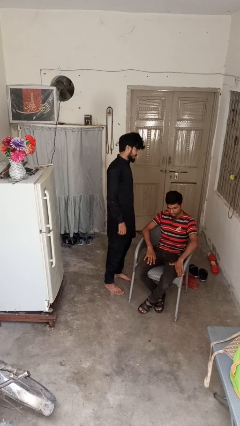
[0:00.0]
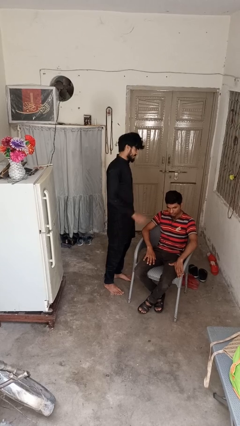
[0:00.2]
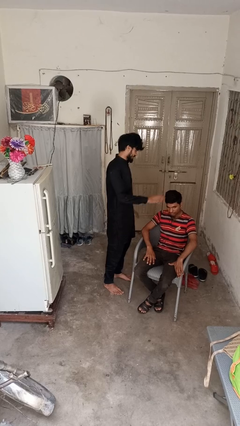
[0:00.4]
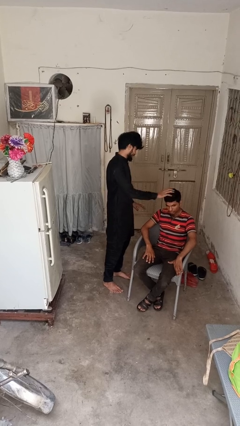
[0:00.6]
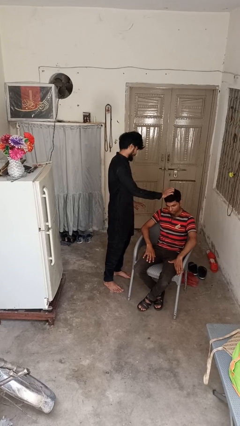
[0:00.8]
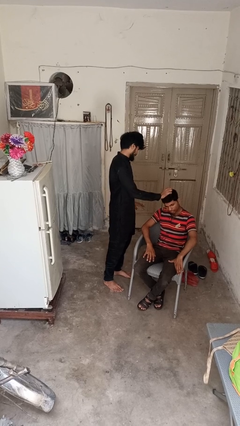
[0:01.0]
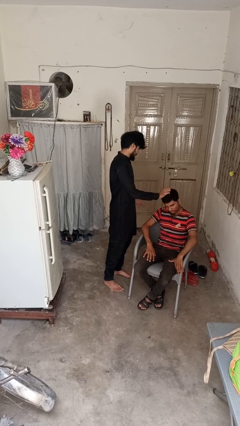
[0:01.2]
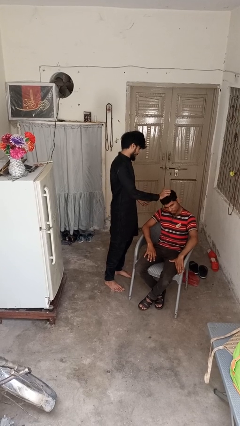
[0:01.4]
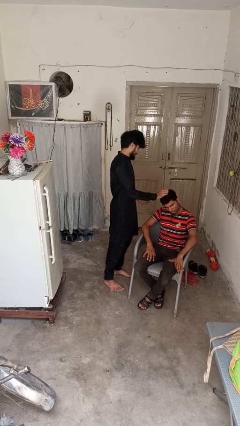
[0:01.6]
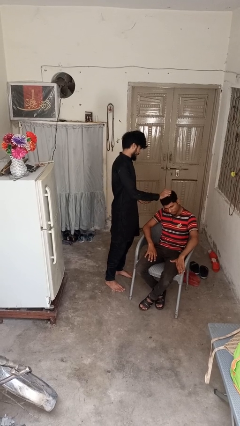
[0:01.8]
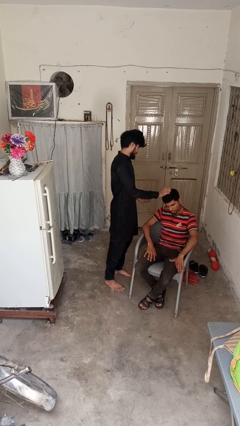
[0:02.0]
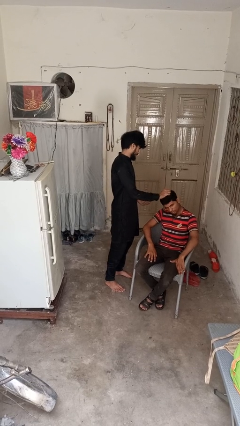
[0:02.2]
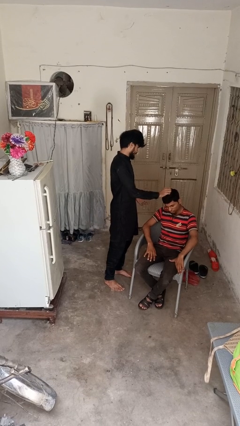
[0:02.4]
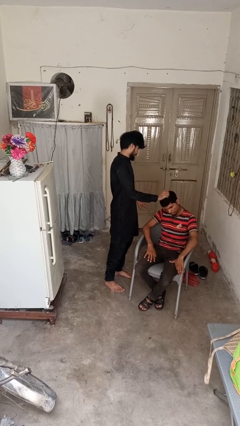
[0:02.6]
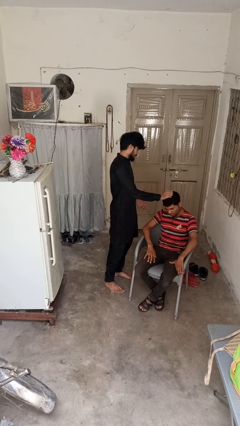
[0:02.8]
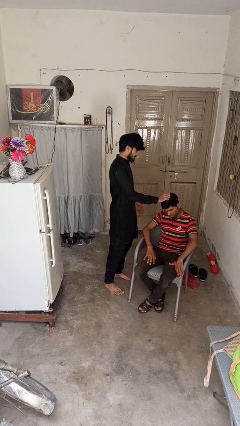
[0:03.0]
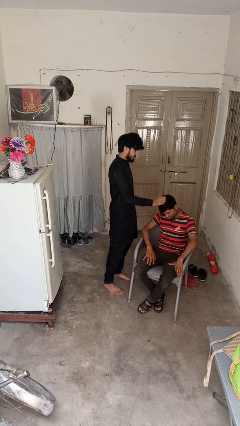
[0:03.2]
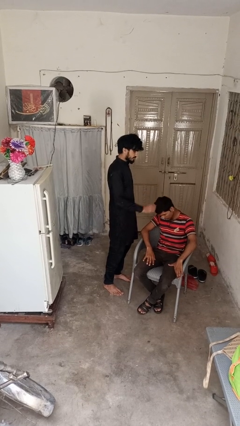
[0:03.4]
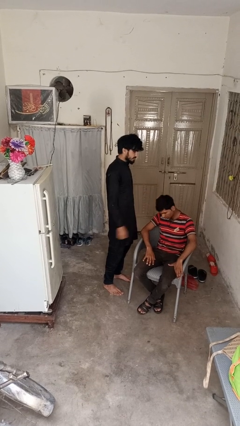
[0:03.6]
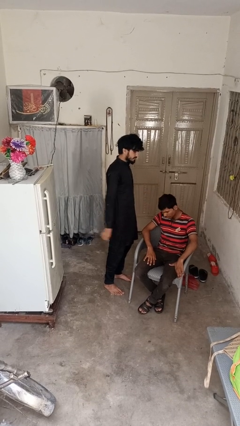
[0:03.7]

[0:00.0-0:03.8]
person grabs person by hair

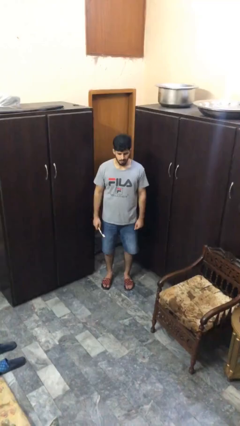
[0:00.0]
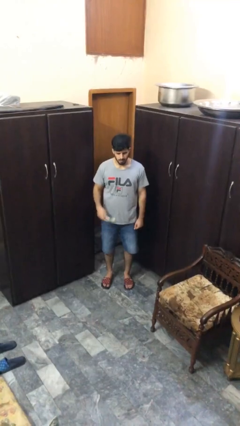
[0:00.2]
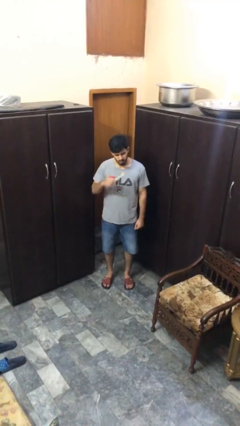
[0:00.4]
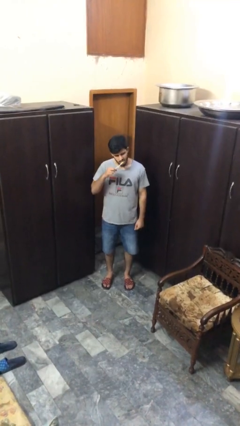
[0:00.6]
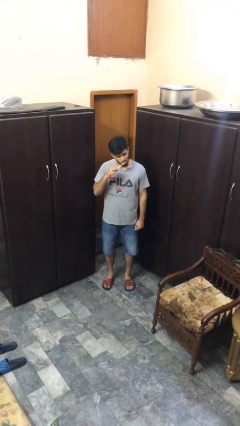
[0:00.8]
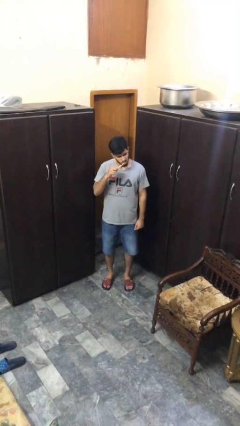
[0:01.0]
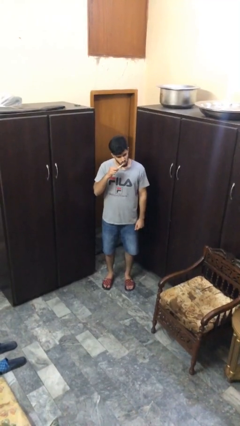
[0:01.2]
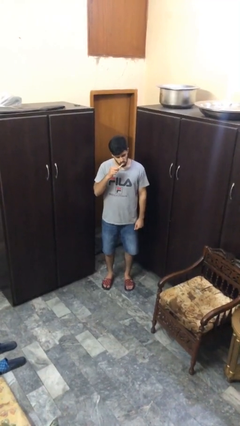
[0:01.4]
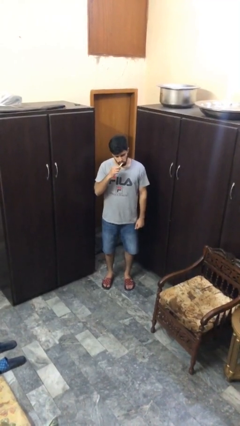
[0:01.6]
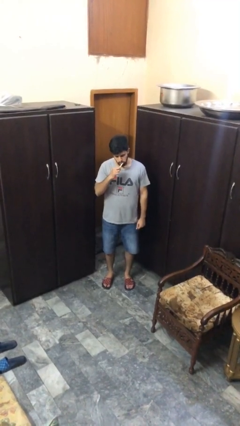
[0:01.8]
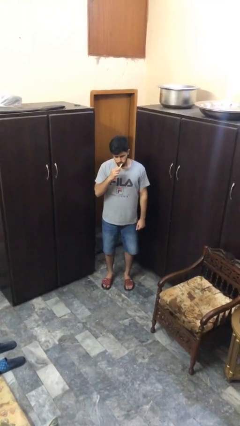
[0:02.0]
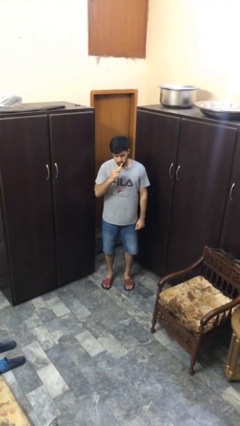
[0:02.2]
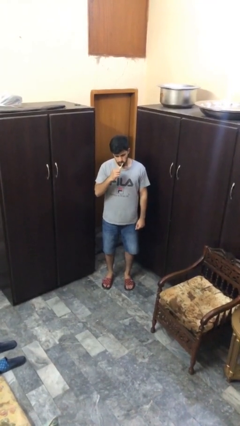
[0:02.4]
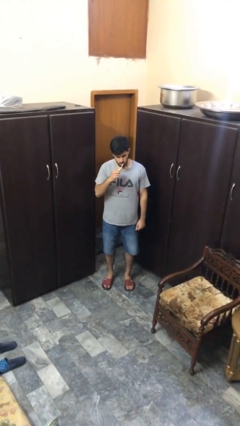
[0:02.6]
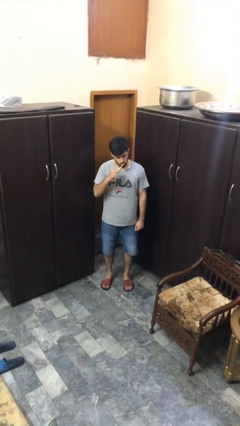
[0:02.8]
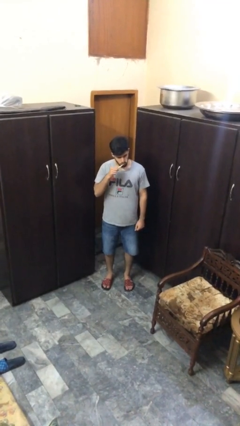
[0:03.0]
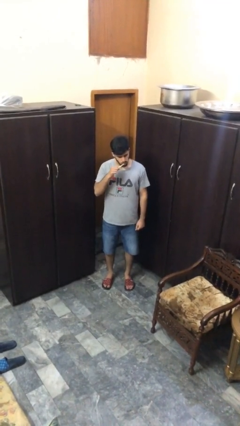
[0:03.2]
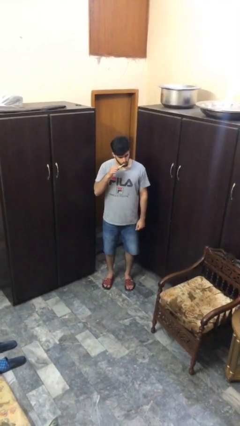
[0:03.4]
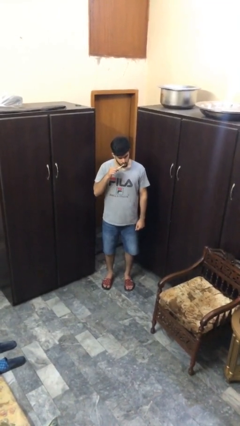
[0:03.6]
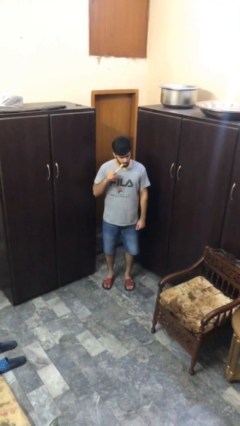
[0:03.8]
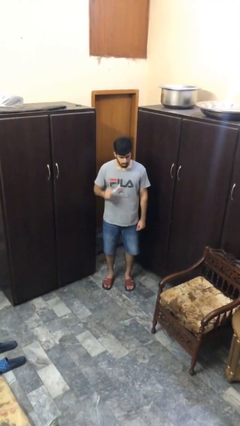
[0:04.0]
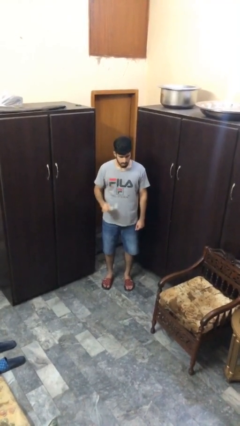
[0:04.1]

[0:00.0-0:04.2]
person brushes teeth

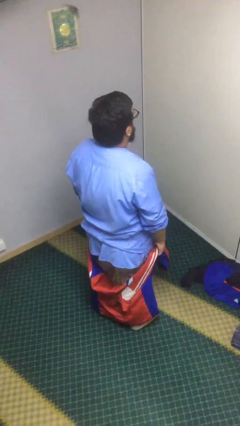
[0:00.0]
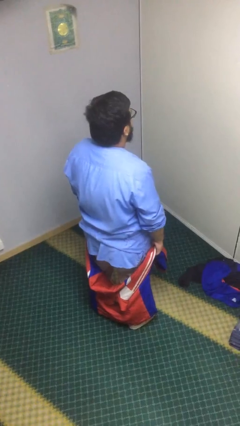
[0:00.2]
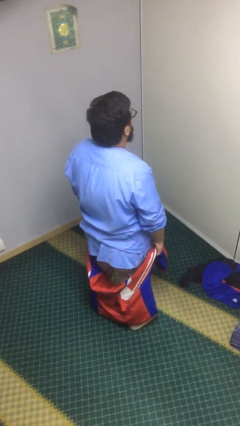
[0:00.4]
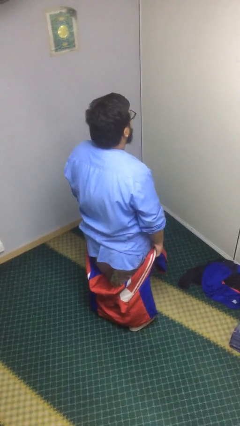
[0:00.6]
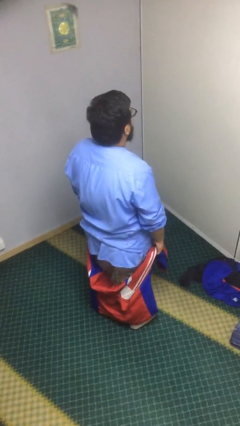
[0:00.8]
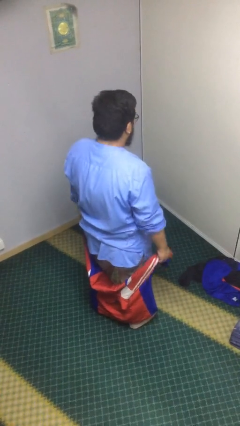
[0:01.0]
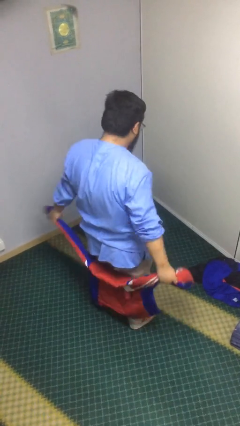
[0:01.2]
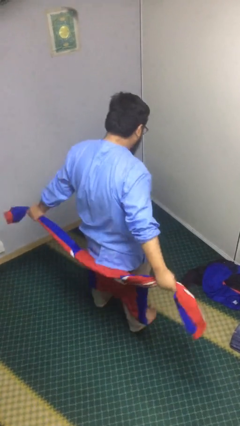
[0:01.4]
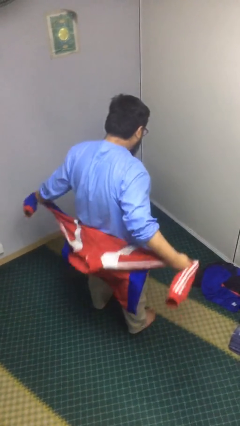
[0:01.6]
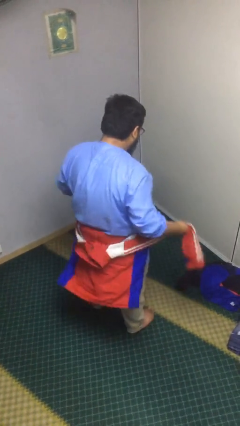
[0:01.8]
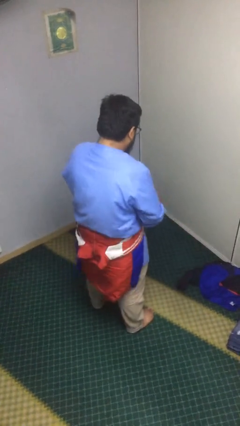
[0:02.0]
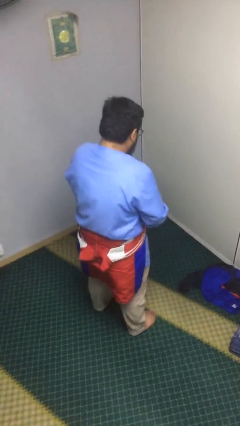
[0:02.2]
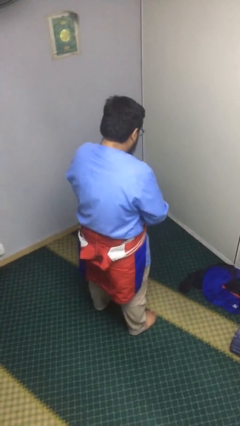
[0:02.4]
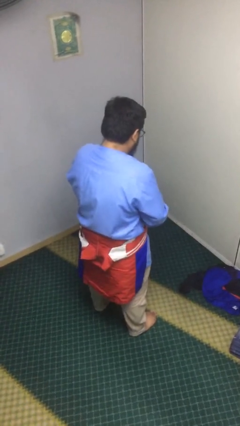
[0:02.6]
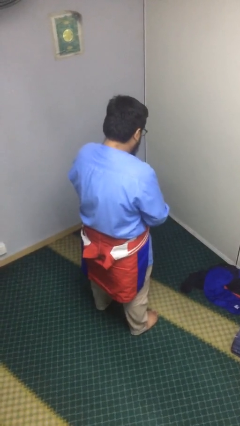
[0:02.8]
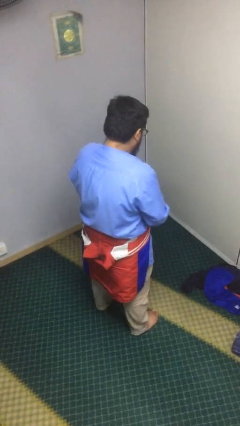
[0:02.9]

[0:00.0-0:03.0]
person ties jacket around waist

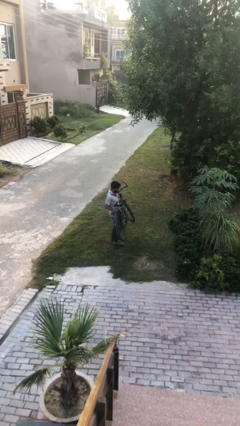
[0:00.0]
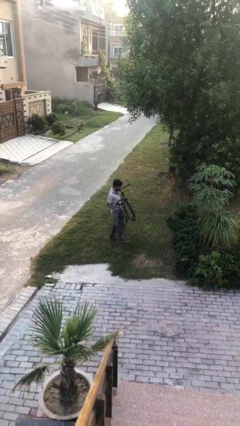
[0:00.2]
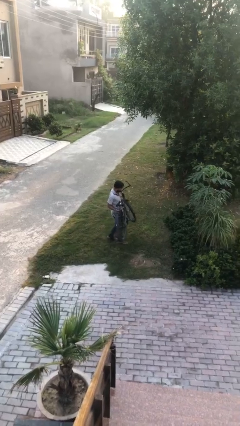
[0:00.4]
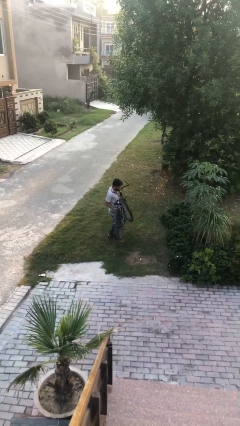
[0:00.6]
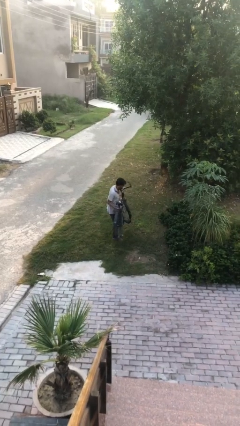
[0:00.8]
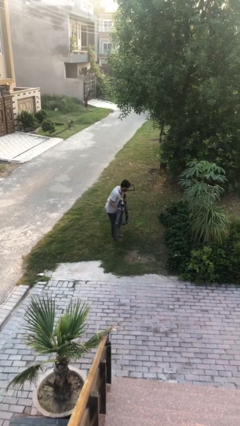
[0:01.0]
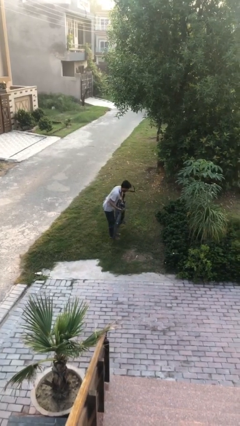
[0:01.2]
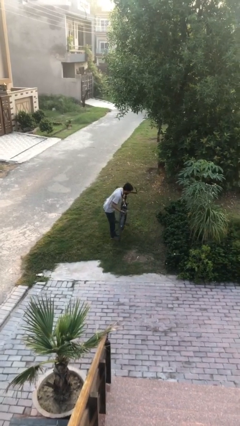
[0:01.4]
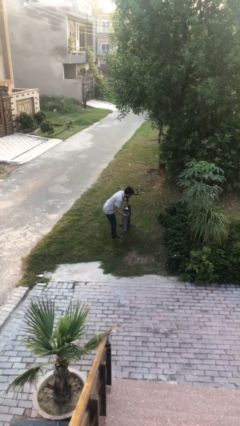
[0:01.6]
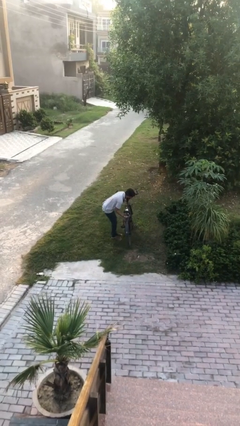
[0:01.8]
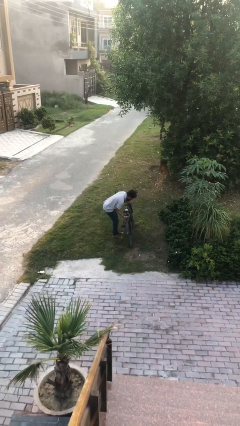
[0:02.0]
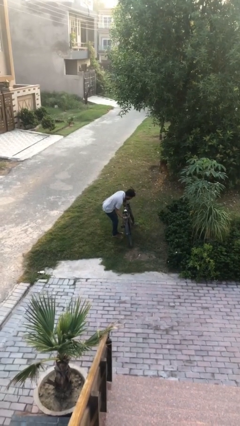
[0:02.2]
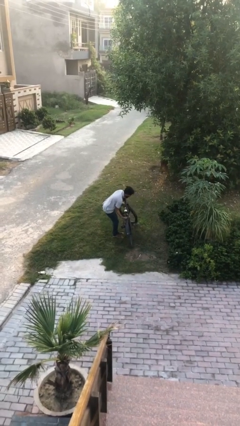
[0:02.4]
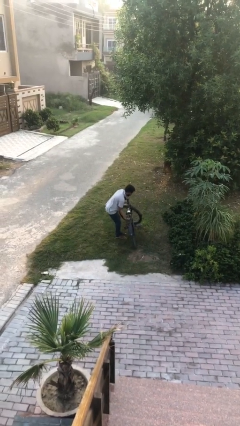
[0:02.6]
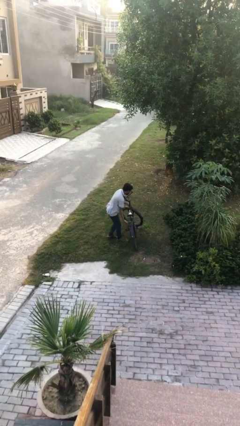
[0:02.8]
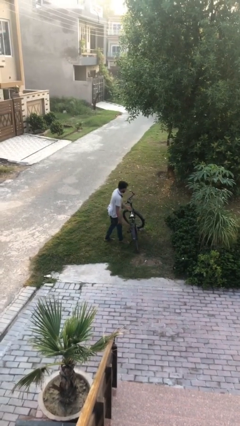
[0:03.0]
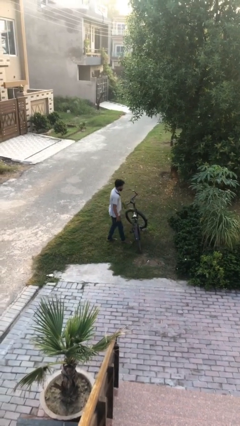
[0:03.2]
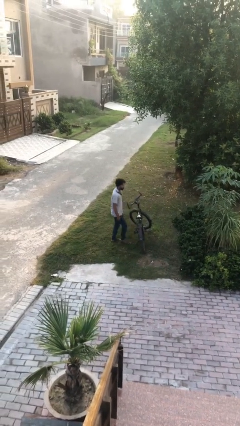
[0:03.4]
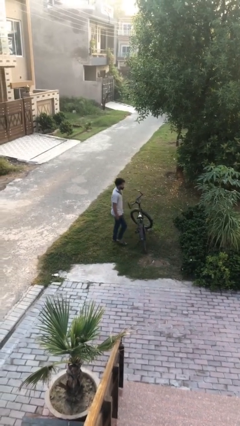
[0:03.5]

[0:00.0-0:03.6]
person puts down object on floor

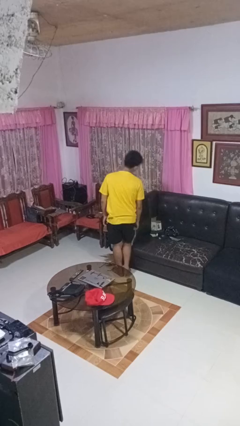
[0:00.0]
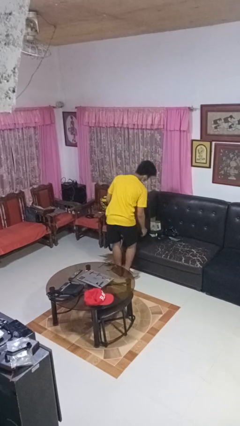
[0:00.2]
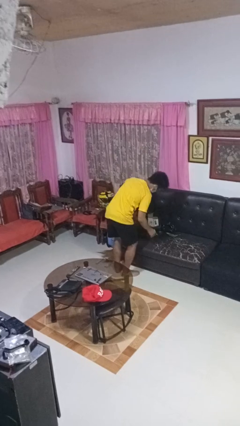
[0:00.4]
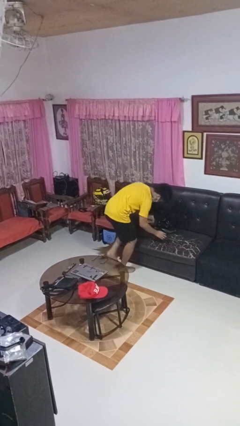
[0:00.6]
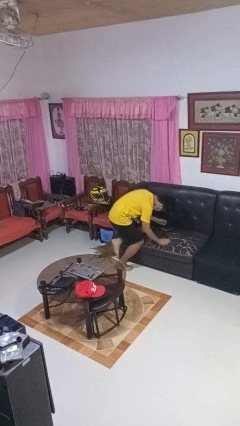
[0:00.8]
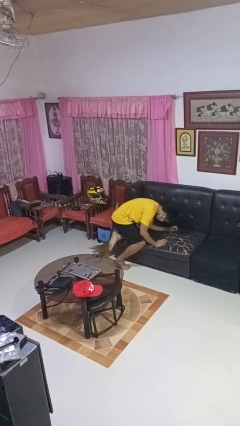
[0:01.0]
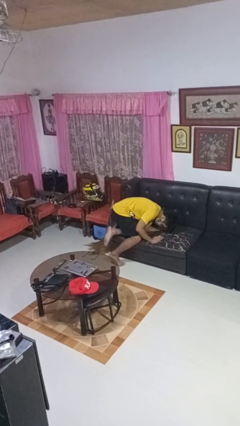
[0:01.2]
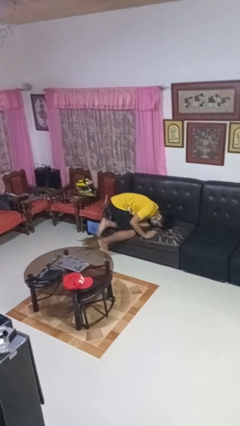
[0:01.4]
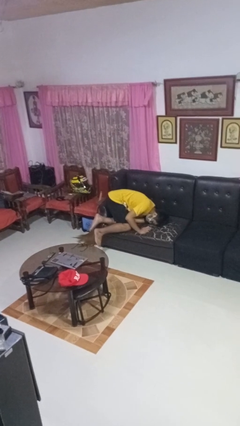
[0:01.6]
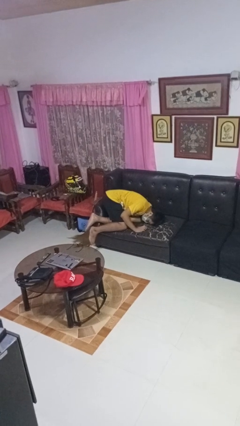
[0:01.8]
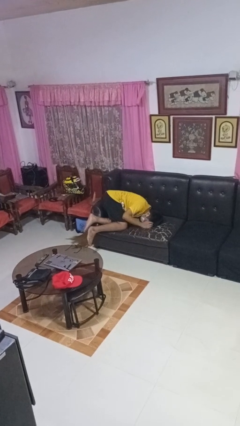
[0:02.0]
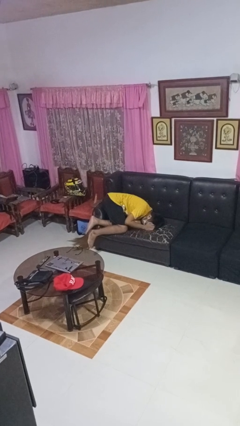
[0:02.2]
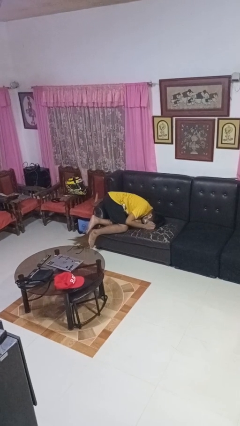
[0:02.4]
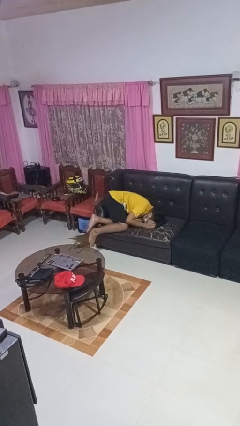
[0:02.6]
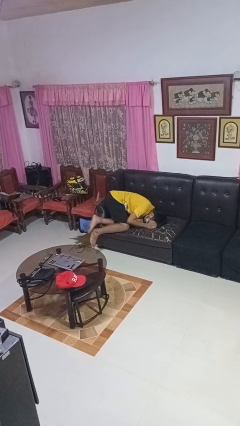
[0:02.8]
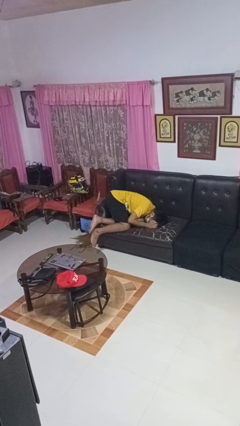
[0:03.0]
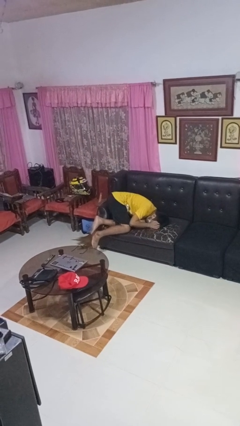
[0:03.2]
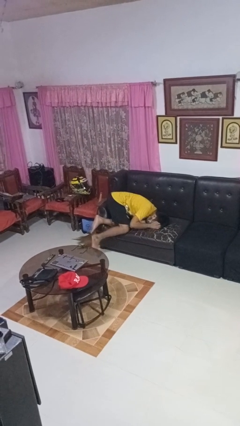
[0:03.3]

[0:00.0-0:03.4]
person lies down on couch
